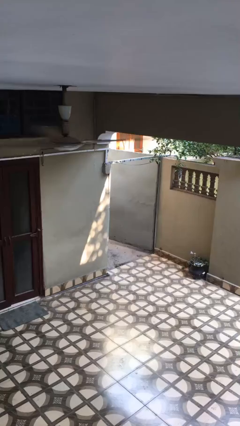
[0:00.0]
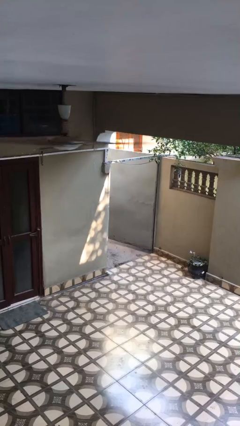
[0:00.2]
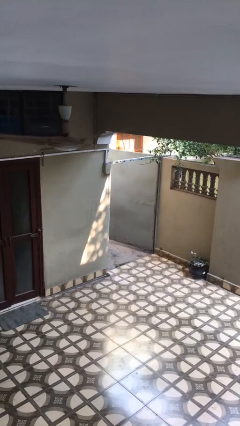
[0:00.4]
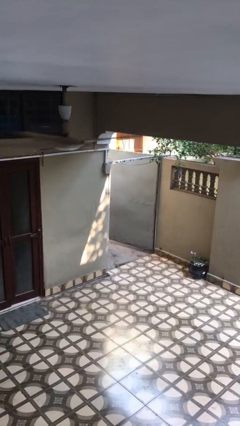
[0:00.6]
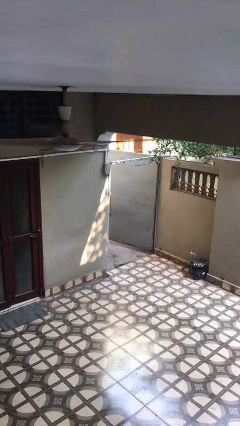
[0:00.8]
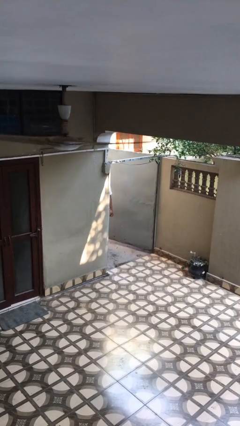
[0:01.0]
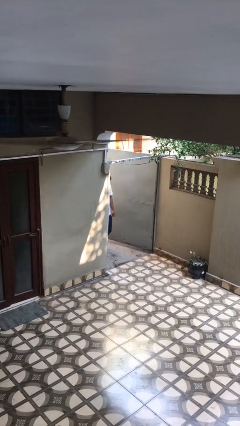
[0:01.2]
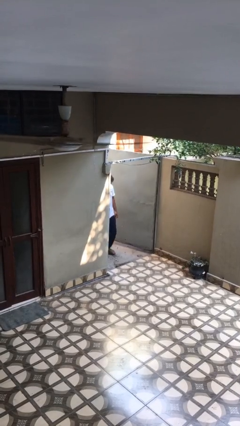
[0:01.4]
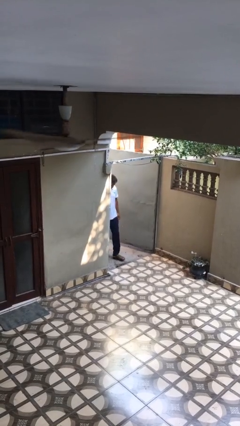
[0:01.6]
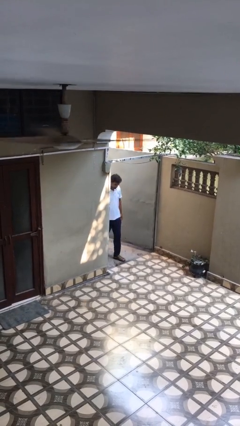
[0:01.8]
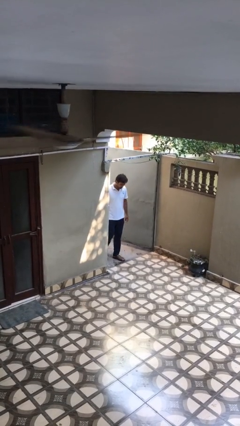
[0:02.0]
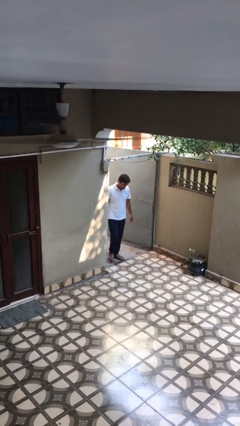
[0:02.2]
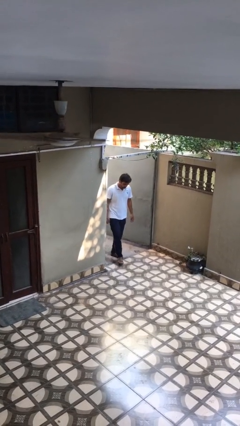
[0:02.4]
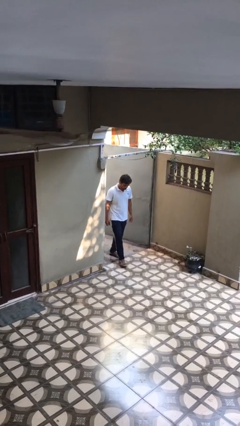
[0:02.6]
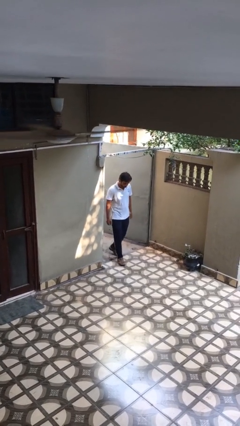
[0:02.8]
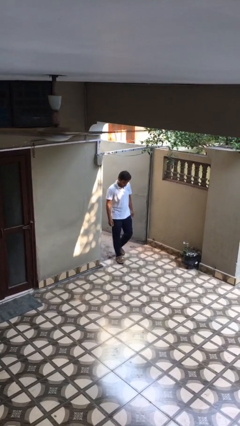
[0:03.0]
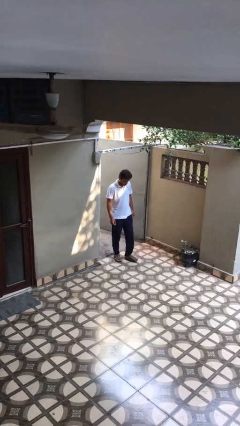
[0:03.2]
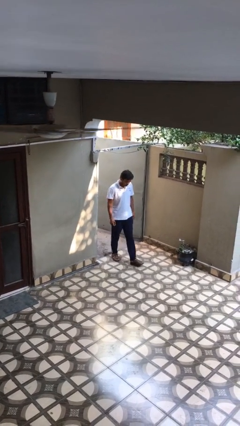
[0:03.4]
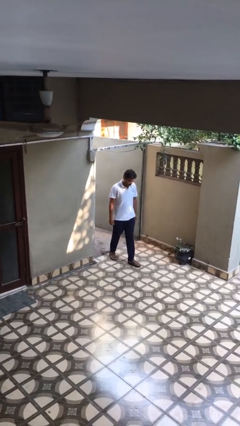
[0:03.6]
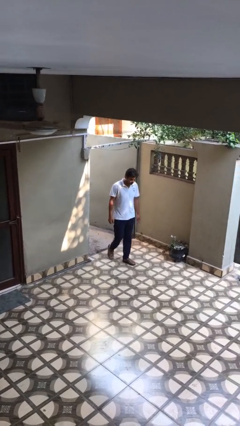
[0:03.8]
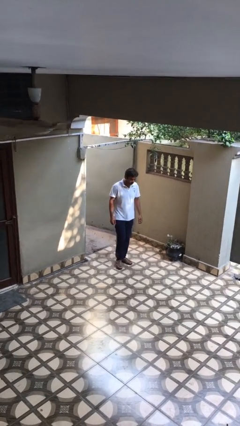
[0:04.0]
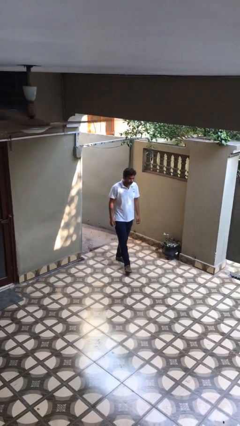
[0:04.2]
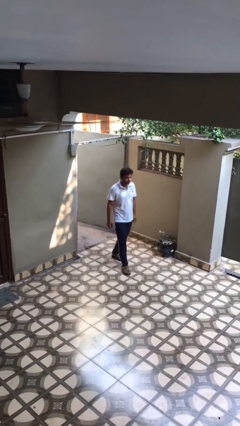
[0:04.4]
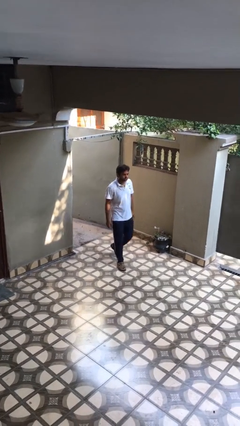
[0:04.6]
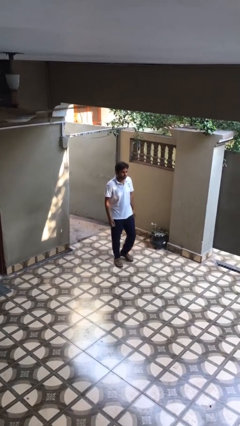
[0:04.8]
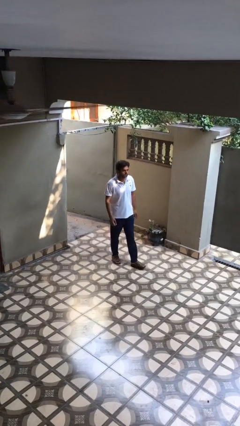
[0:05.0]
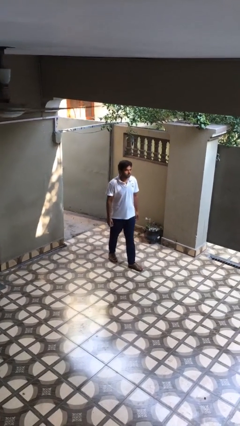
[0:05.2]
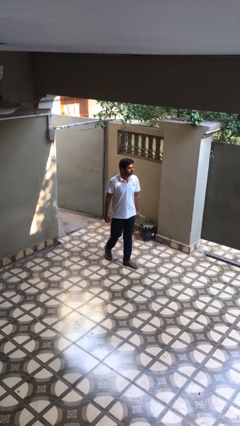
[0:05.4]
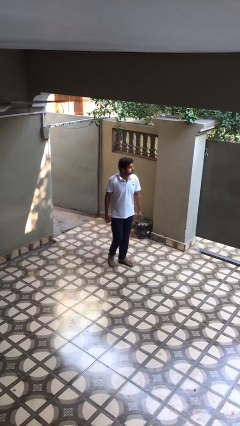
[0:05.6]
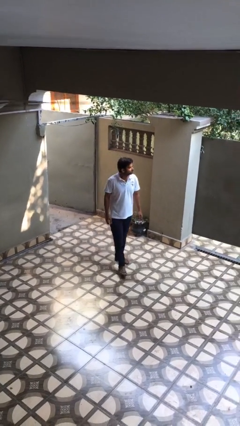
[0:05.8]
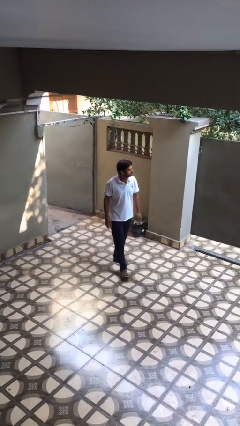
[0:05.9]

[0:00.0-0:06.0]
person enters scene through structure

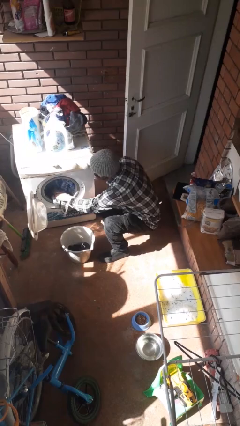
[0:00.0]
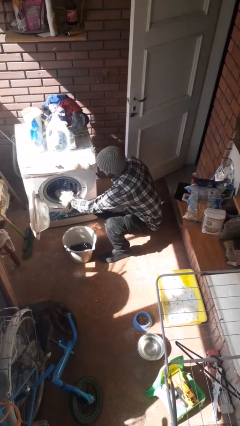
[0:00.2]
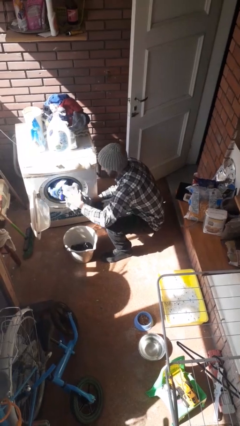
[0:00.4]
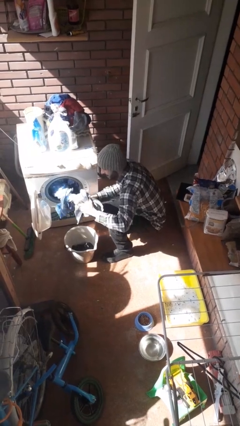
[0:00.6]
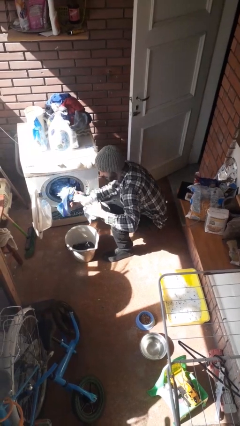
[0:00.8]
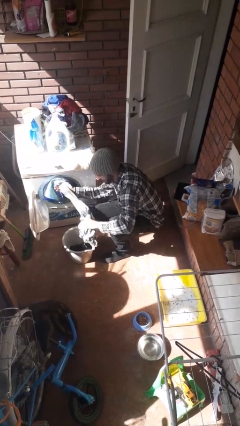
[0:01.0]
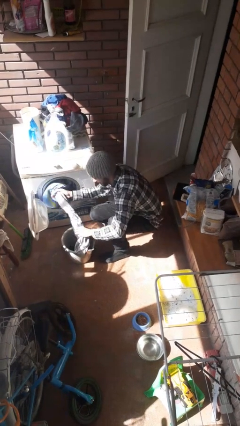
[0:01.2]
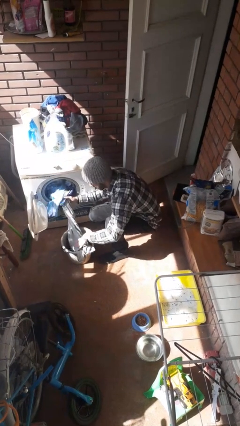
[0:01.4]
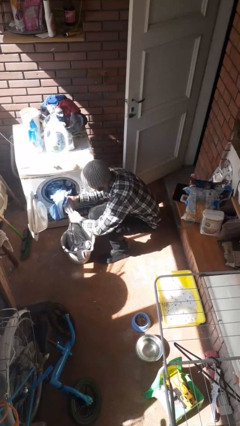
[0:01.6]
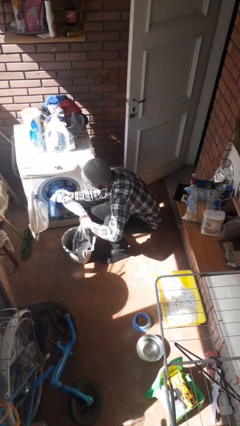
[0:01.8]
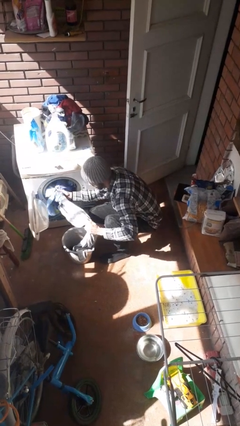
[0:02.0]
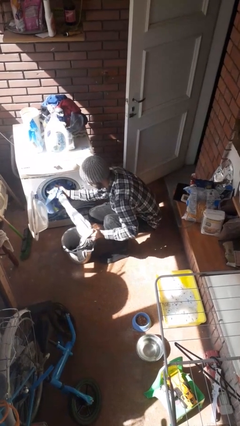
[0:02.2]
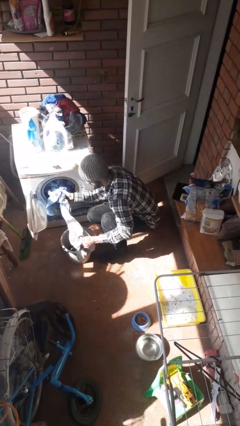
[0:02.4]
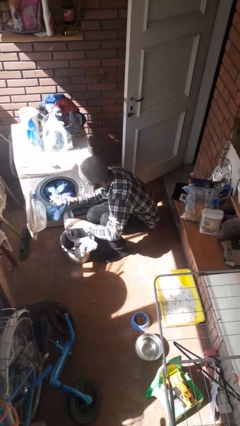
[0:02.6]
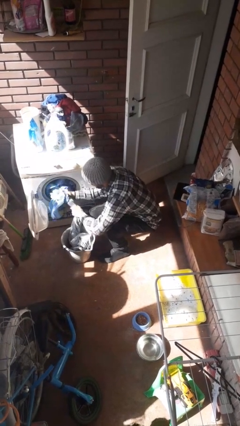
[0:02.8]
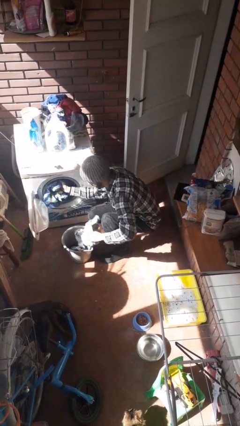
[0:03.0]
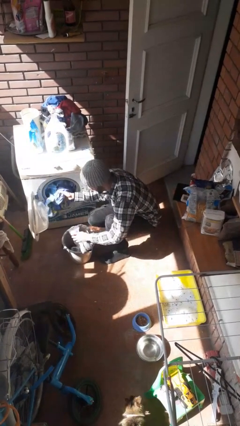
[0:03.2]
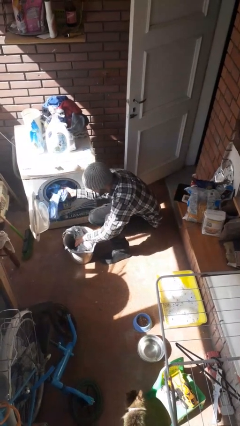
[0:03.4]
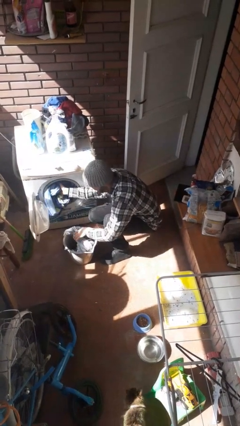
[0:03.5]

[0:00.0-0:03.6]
person unloads clotheswasher

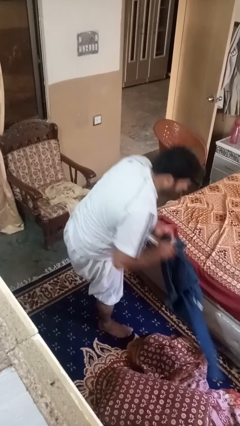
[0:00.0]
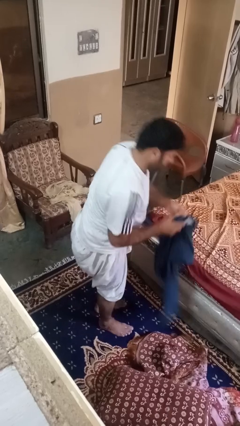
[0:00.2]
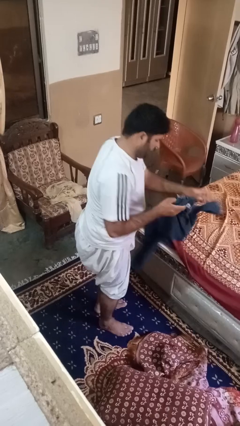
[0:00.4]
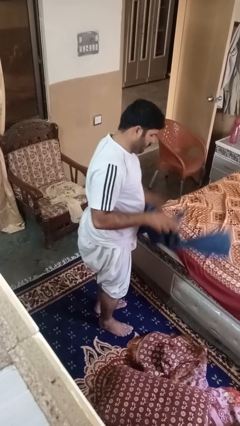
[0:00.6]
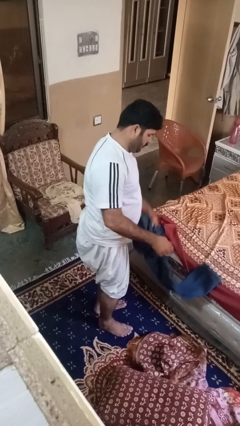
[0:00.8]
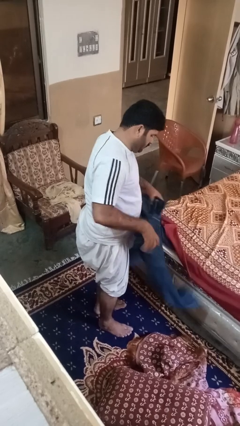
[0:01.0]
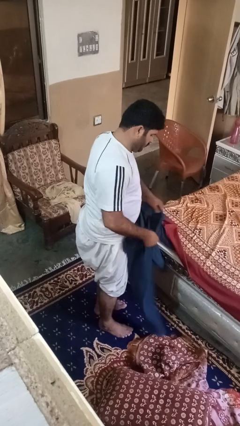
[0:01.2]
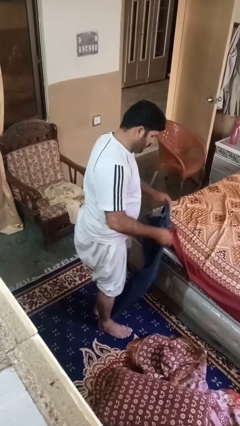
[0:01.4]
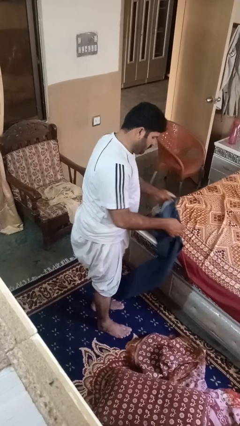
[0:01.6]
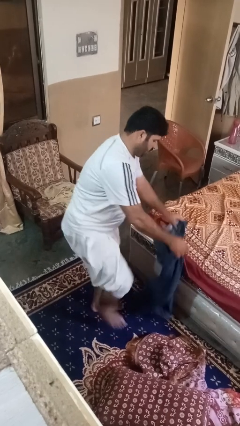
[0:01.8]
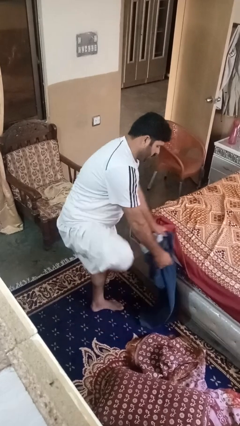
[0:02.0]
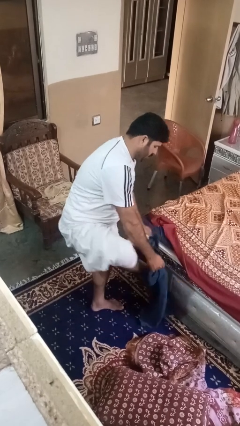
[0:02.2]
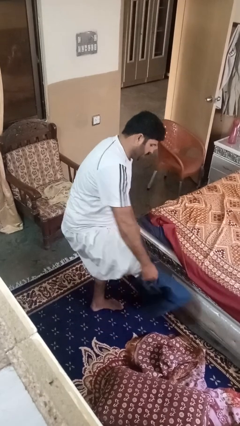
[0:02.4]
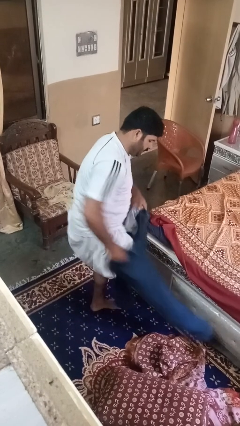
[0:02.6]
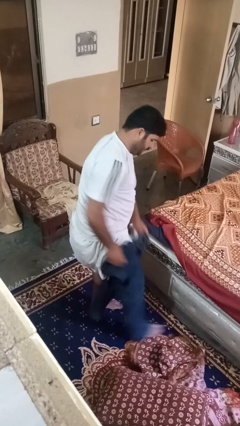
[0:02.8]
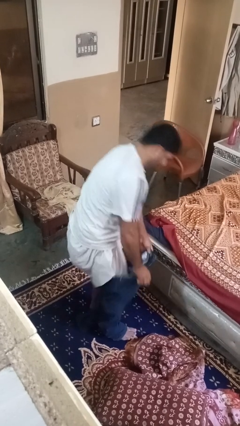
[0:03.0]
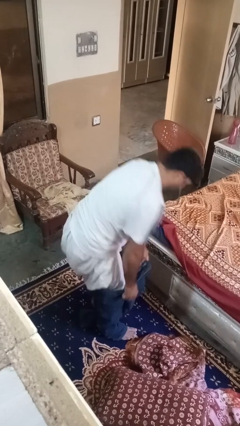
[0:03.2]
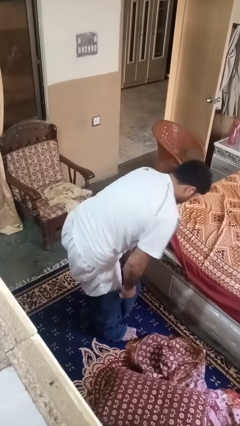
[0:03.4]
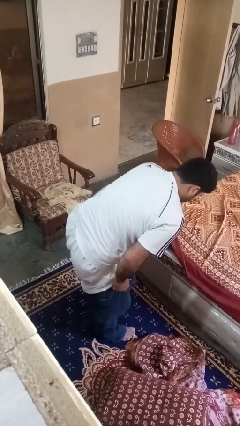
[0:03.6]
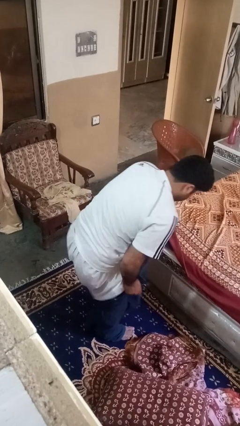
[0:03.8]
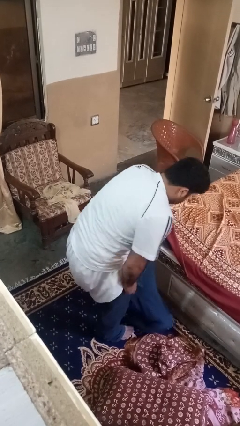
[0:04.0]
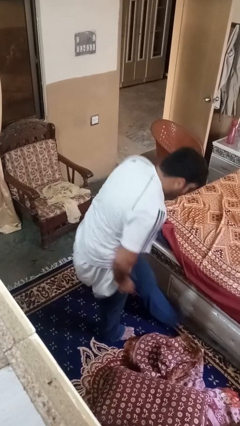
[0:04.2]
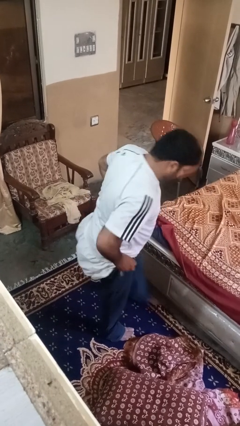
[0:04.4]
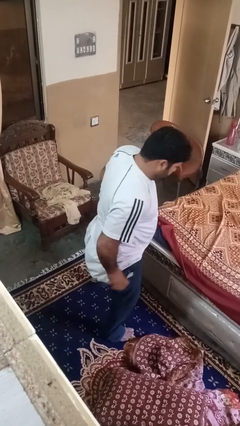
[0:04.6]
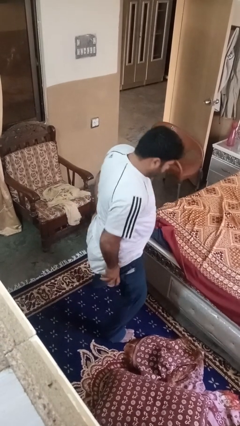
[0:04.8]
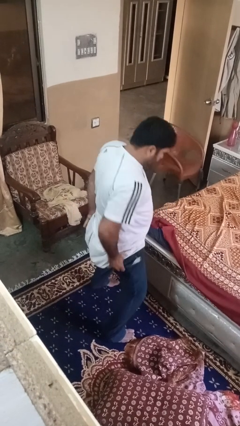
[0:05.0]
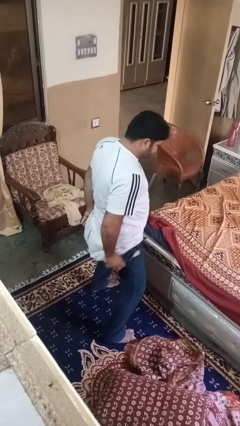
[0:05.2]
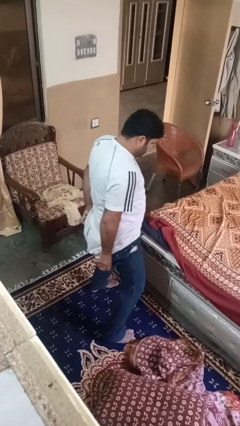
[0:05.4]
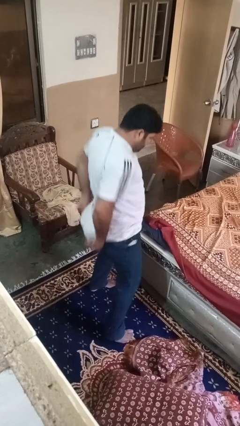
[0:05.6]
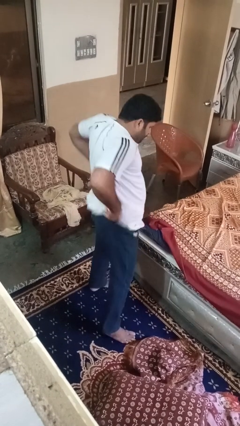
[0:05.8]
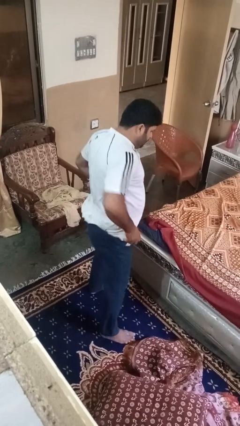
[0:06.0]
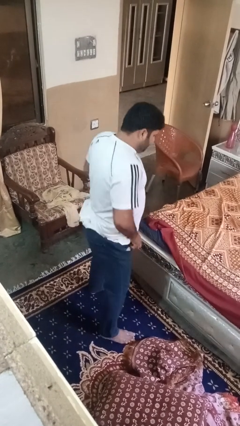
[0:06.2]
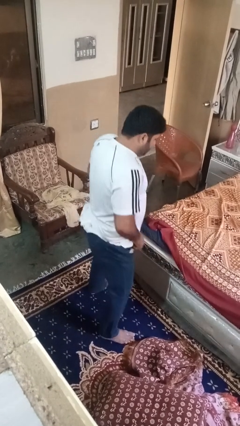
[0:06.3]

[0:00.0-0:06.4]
person puts on pants

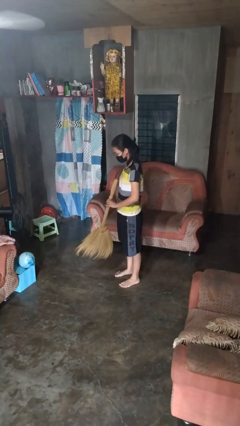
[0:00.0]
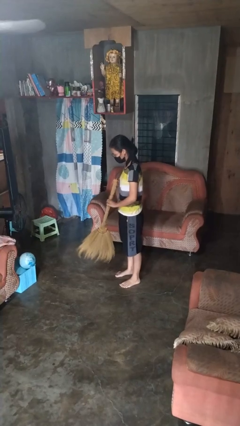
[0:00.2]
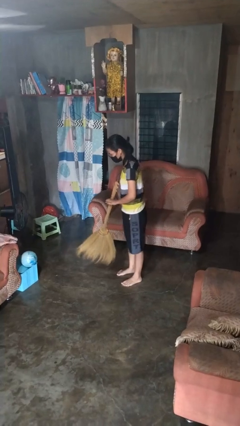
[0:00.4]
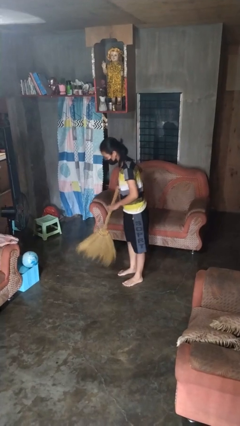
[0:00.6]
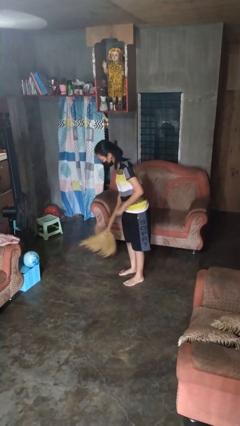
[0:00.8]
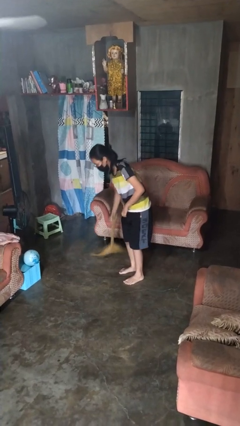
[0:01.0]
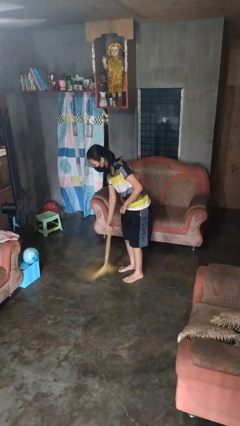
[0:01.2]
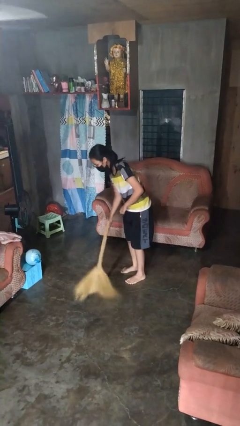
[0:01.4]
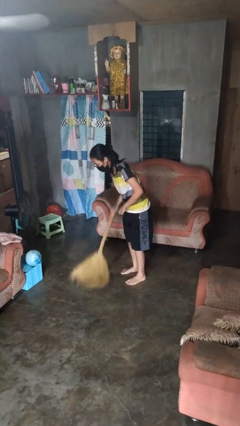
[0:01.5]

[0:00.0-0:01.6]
person sweeps floor

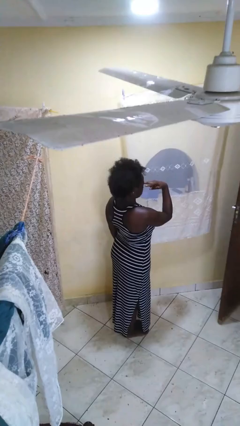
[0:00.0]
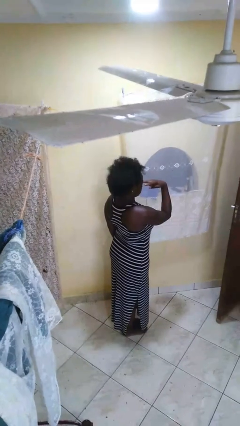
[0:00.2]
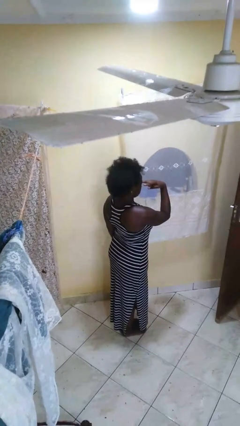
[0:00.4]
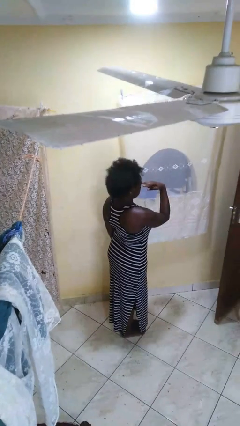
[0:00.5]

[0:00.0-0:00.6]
person gestures watch closely
